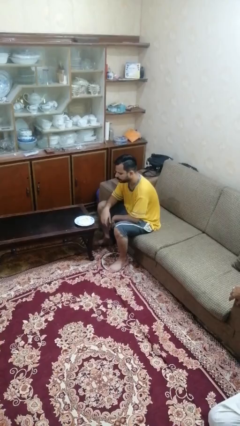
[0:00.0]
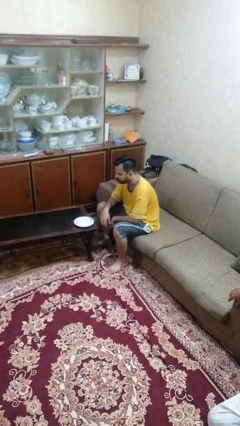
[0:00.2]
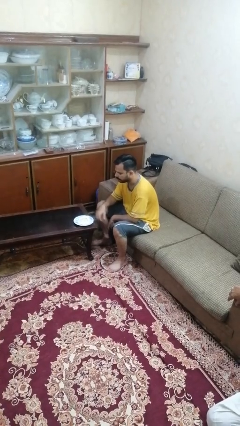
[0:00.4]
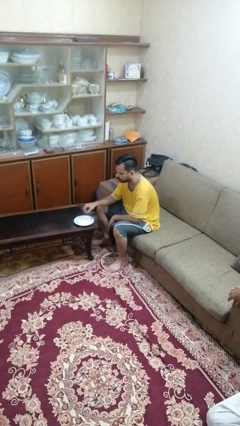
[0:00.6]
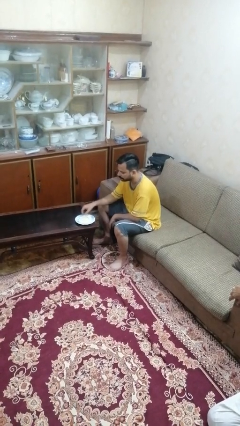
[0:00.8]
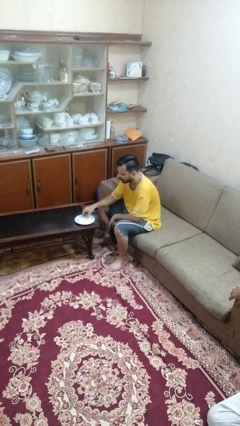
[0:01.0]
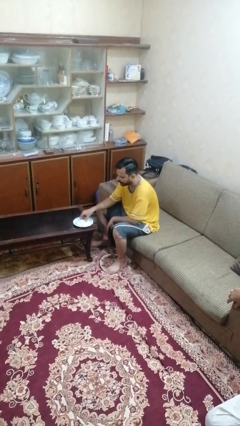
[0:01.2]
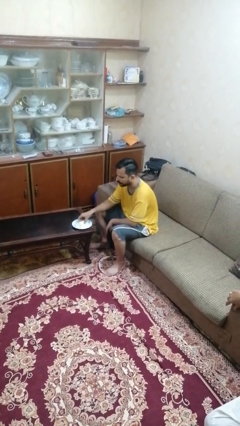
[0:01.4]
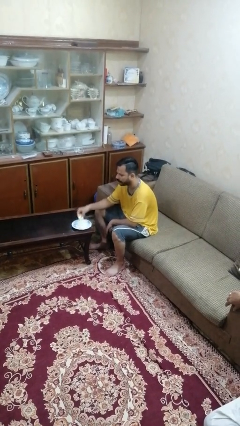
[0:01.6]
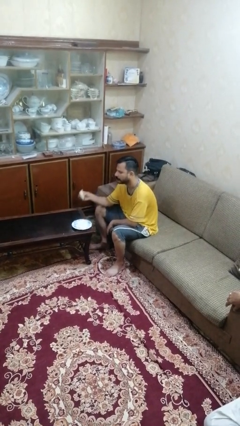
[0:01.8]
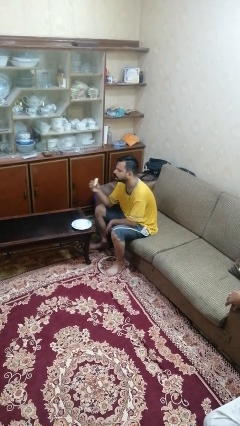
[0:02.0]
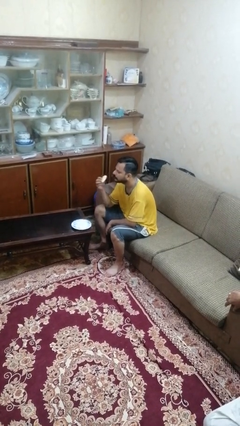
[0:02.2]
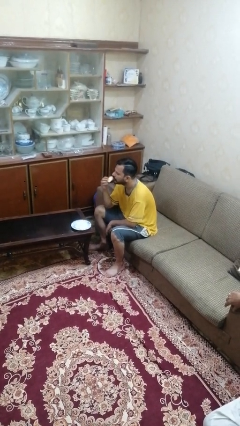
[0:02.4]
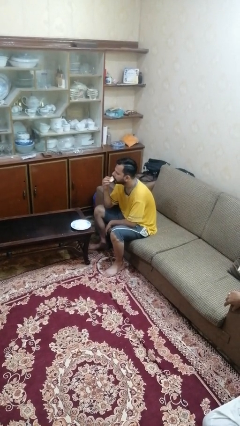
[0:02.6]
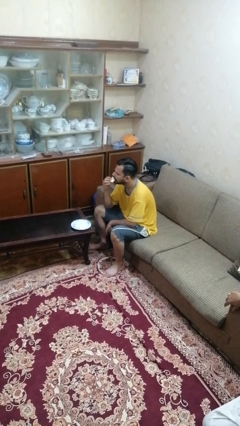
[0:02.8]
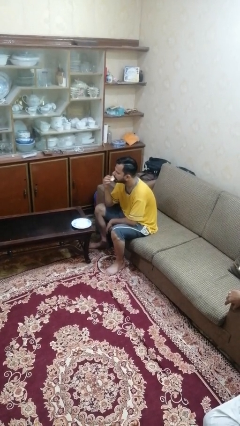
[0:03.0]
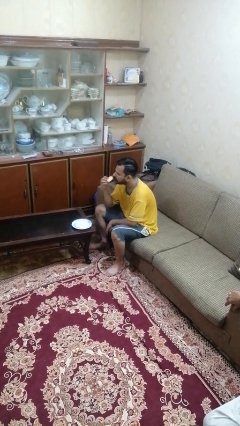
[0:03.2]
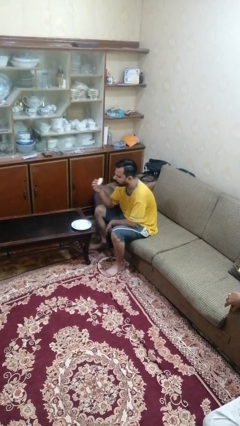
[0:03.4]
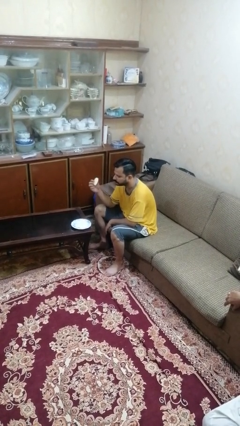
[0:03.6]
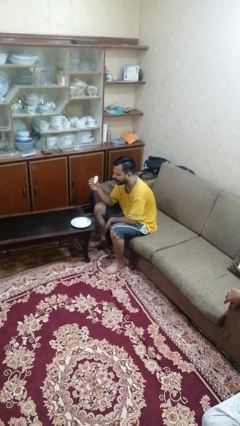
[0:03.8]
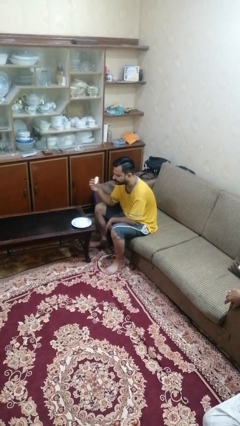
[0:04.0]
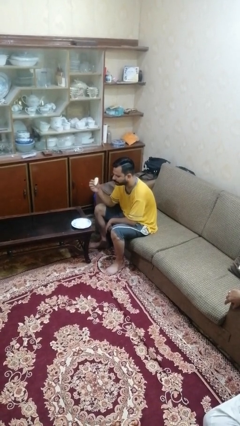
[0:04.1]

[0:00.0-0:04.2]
person eats with hands

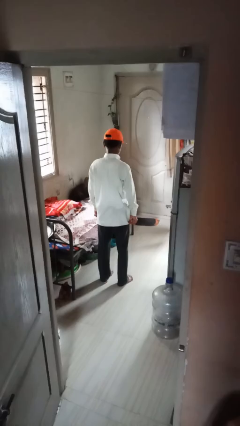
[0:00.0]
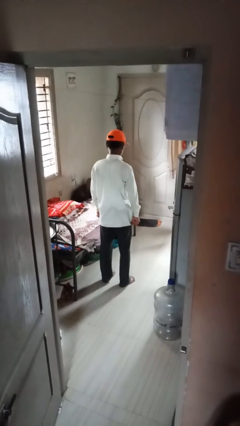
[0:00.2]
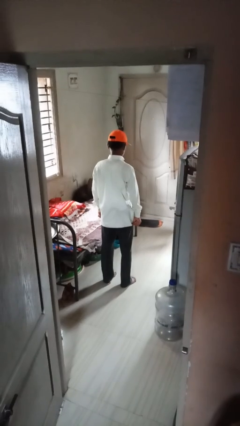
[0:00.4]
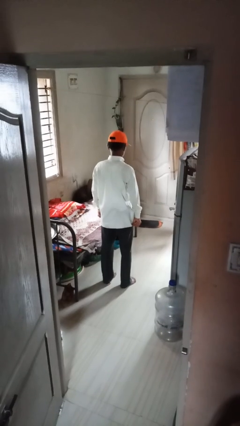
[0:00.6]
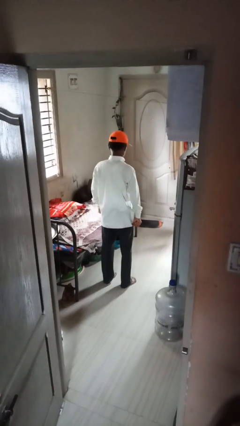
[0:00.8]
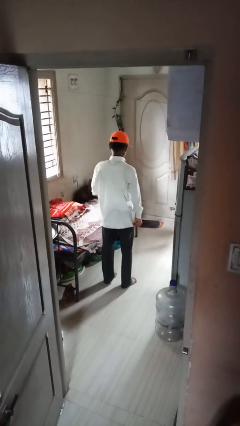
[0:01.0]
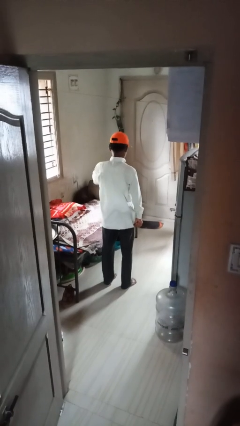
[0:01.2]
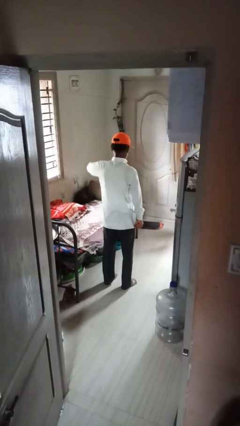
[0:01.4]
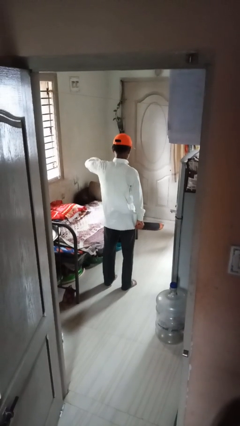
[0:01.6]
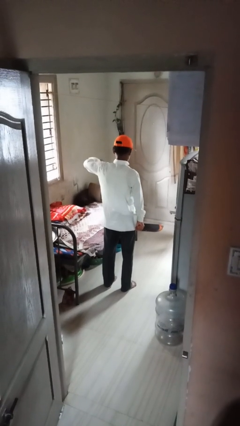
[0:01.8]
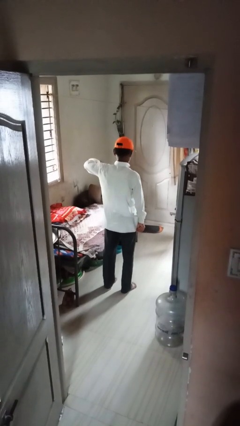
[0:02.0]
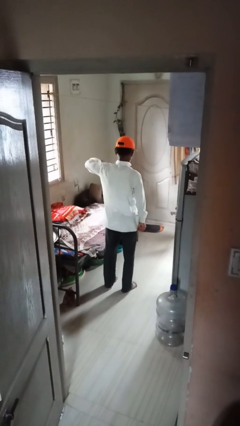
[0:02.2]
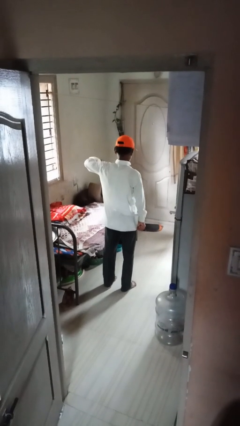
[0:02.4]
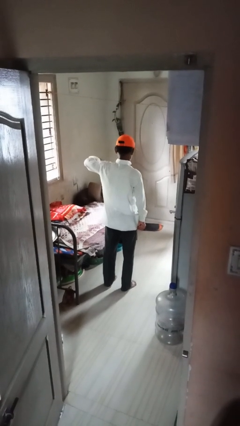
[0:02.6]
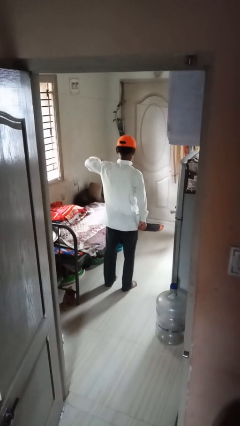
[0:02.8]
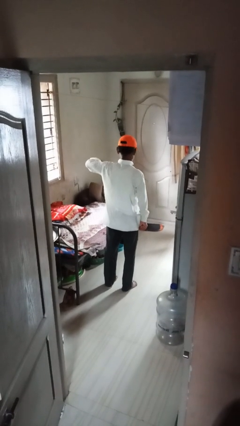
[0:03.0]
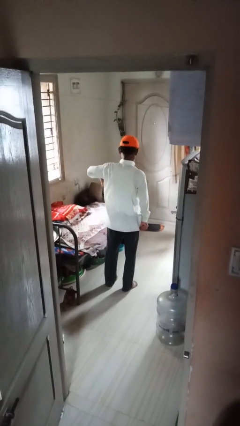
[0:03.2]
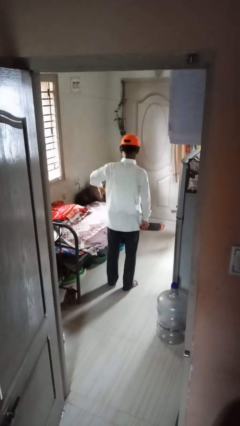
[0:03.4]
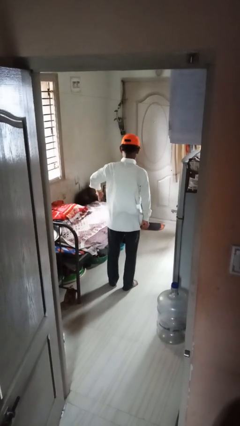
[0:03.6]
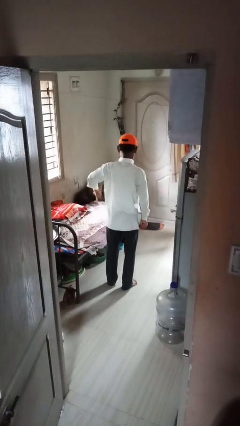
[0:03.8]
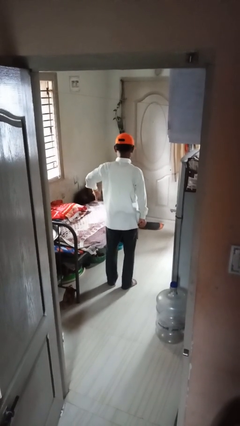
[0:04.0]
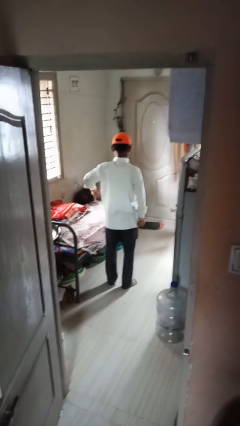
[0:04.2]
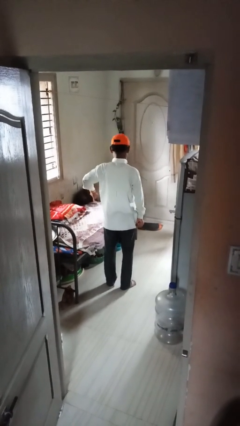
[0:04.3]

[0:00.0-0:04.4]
person gestures thumbs down

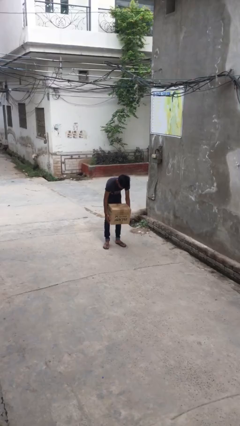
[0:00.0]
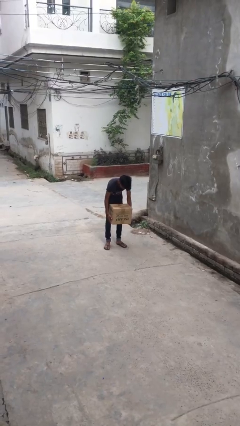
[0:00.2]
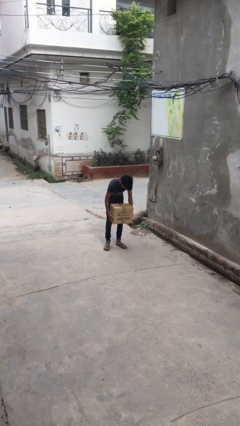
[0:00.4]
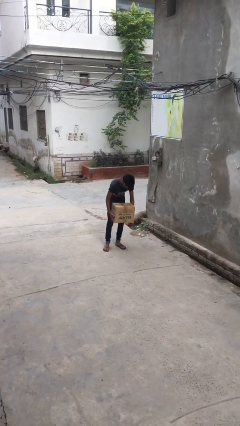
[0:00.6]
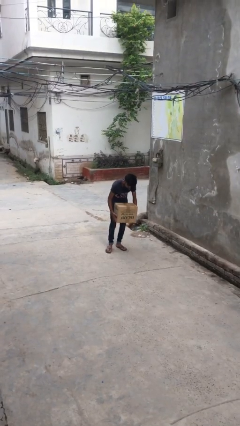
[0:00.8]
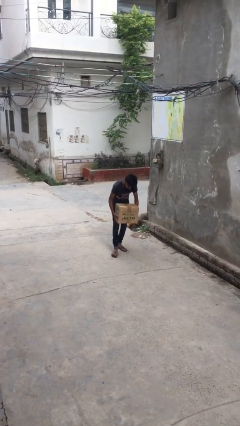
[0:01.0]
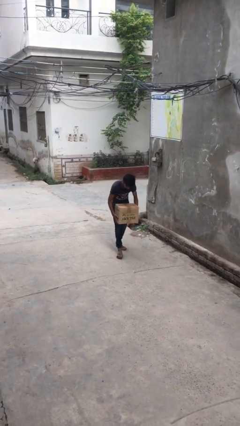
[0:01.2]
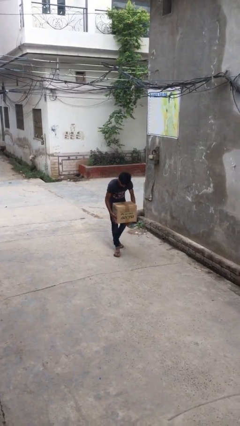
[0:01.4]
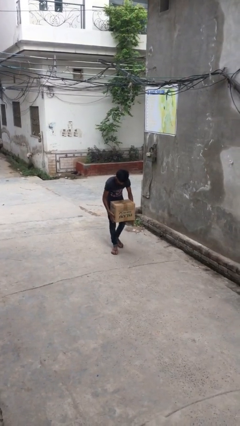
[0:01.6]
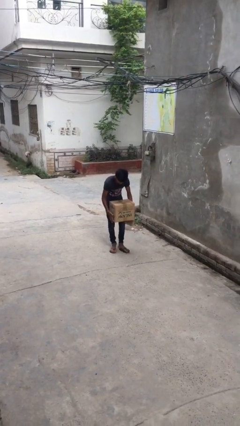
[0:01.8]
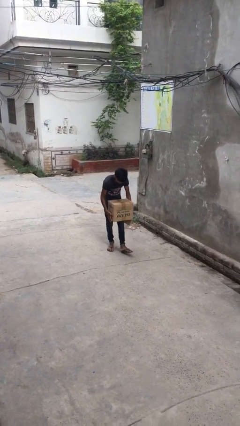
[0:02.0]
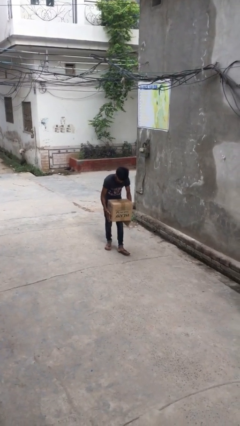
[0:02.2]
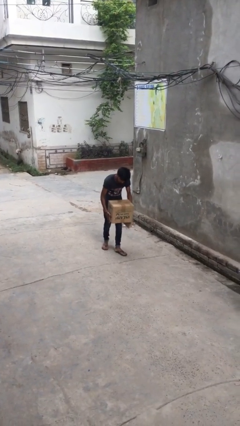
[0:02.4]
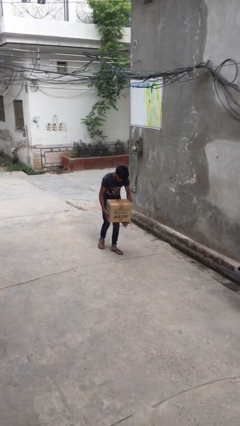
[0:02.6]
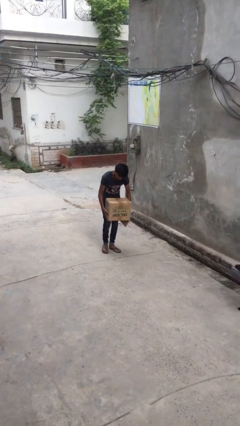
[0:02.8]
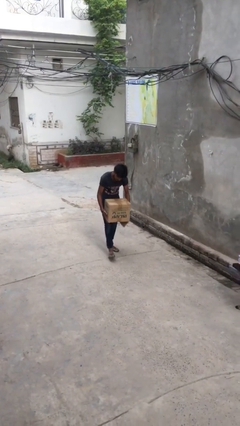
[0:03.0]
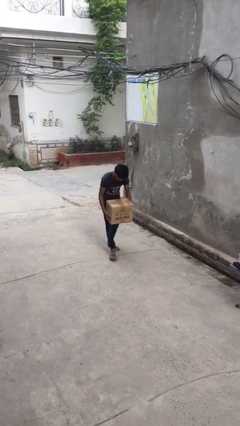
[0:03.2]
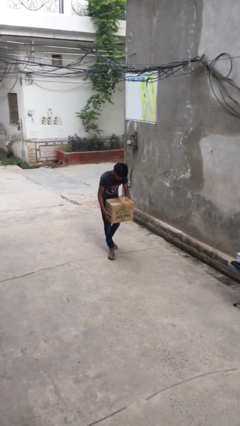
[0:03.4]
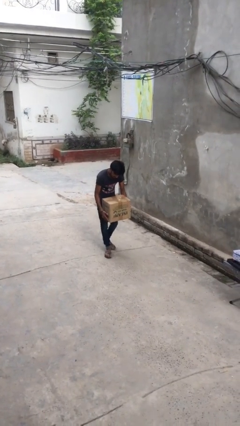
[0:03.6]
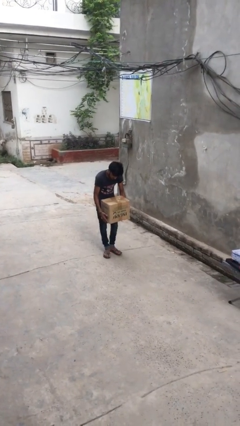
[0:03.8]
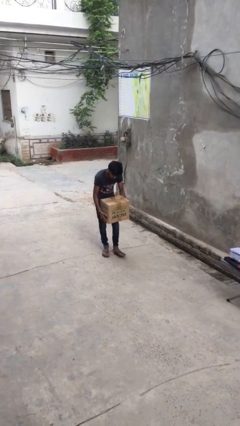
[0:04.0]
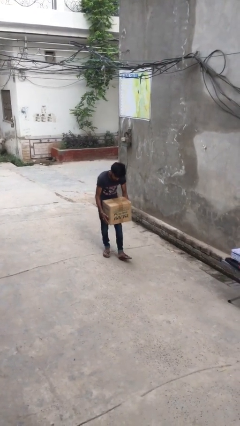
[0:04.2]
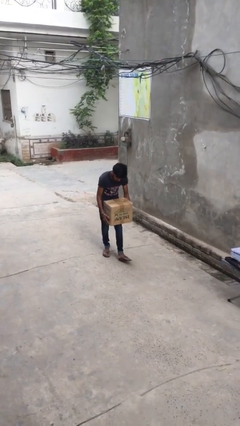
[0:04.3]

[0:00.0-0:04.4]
person carries heavy object

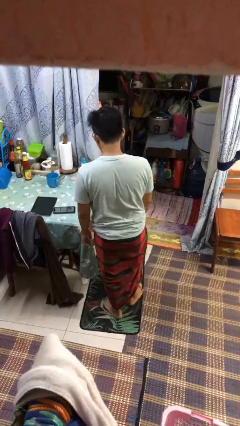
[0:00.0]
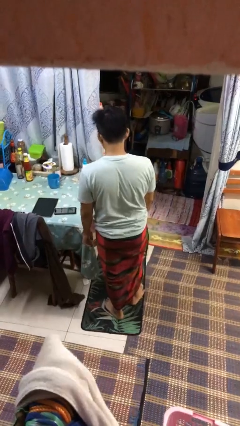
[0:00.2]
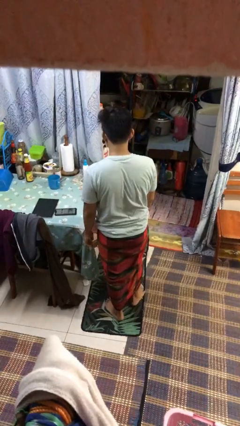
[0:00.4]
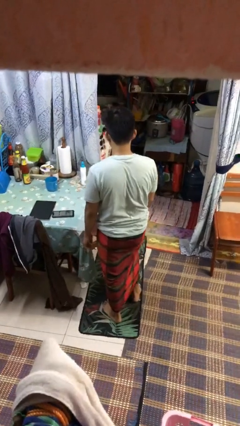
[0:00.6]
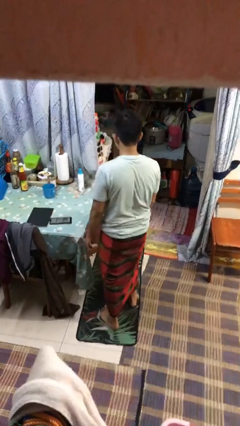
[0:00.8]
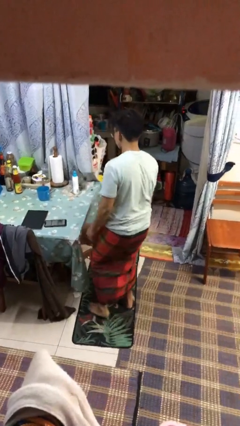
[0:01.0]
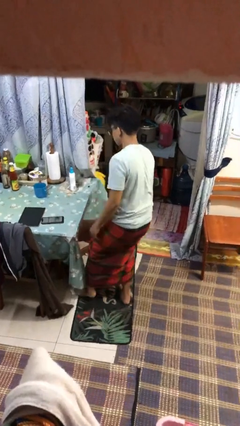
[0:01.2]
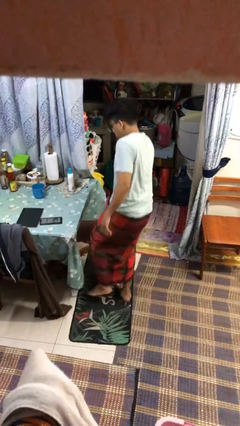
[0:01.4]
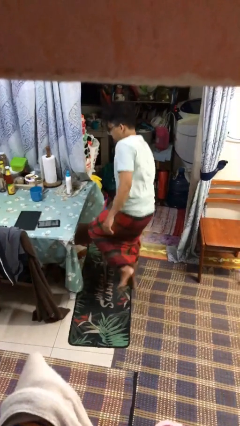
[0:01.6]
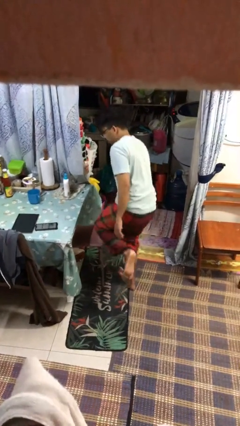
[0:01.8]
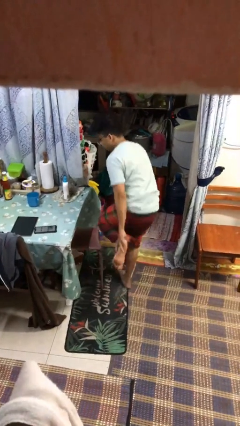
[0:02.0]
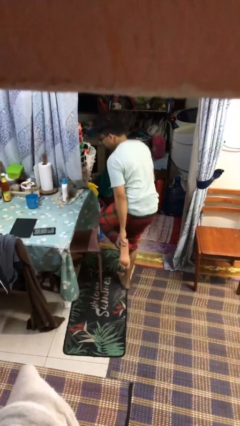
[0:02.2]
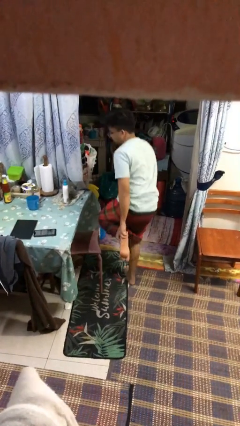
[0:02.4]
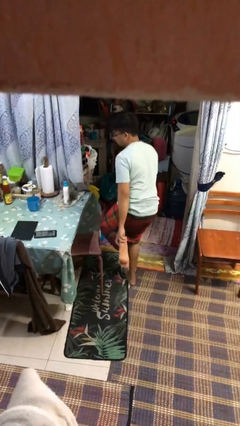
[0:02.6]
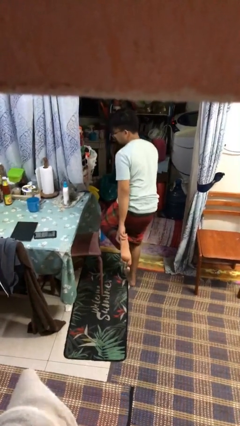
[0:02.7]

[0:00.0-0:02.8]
person stubs toe

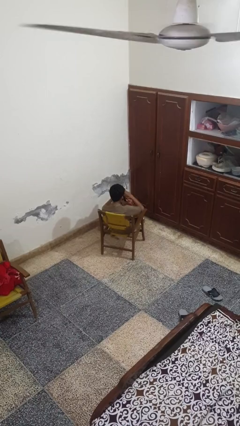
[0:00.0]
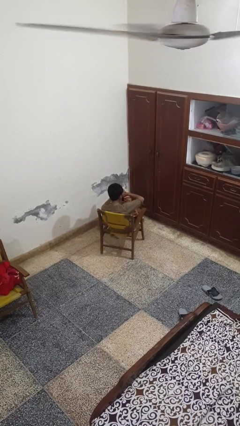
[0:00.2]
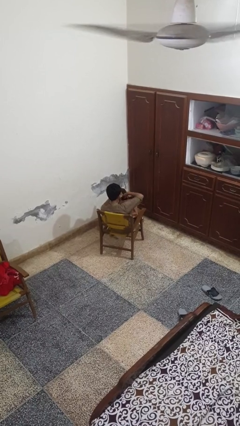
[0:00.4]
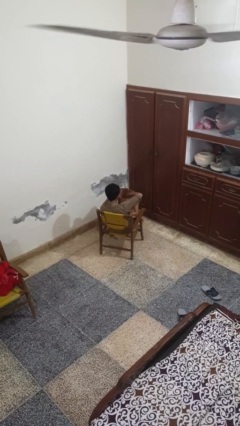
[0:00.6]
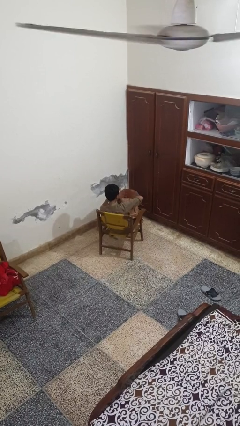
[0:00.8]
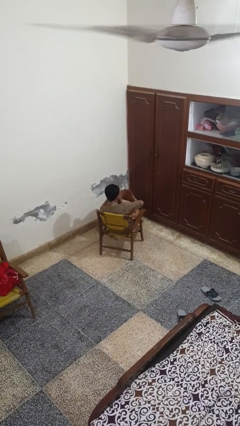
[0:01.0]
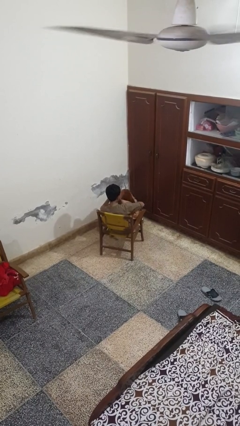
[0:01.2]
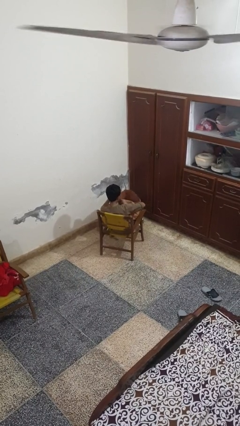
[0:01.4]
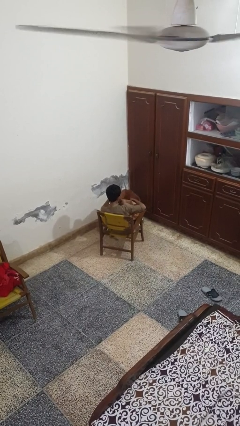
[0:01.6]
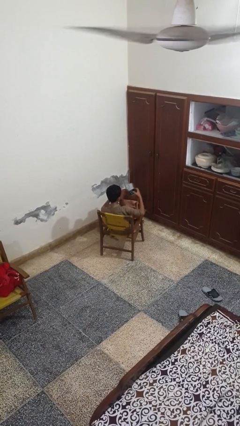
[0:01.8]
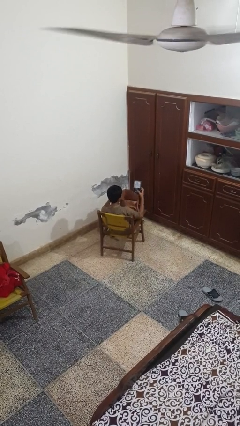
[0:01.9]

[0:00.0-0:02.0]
person takes object from bag
